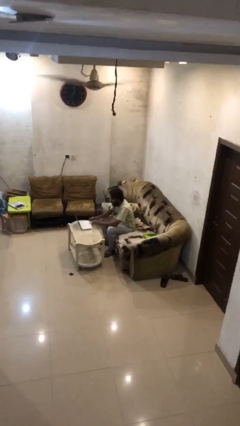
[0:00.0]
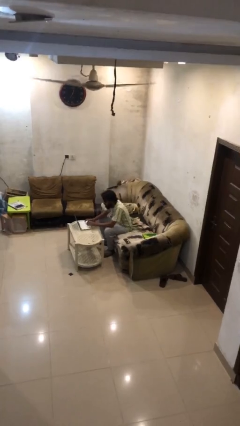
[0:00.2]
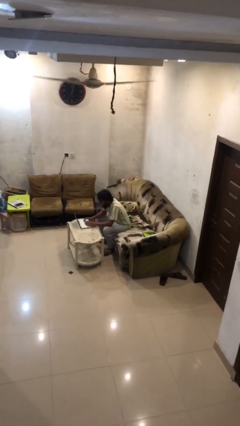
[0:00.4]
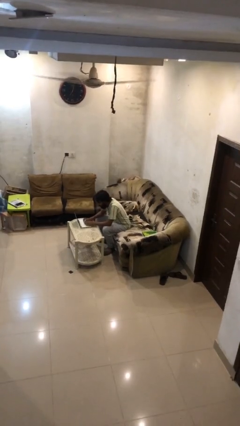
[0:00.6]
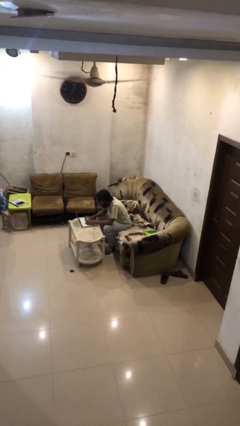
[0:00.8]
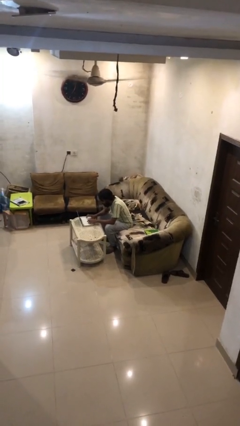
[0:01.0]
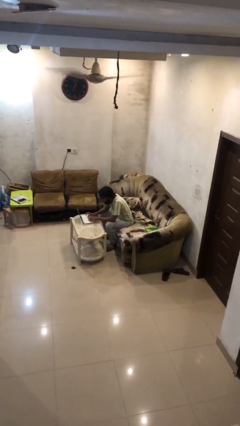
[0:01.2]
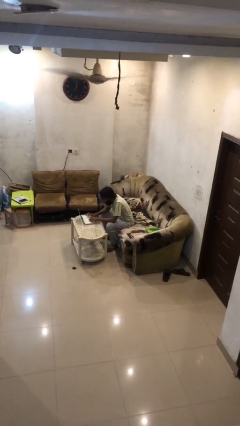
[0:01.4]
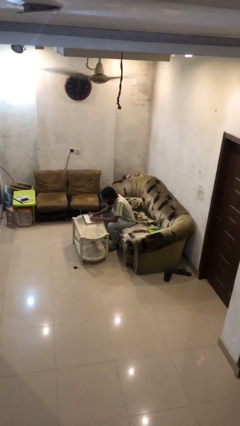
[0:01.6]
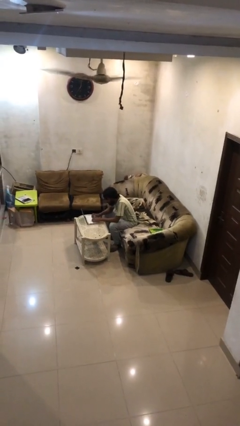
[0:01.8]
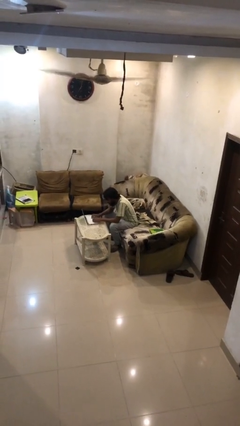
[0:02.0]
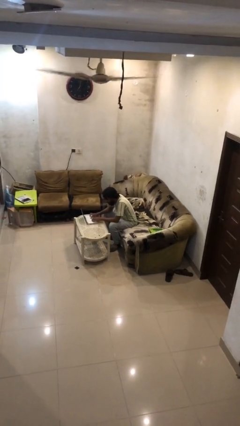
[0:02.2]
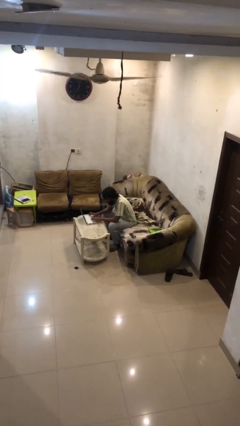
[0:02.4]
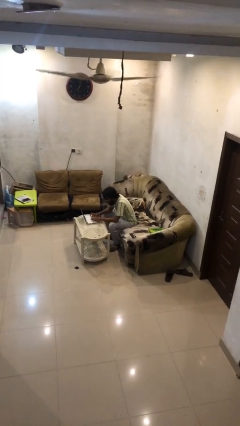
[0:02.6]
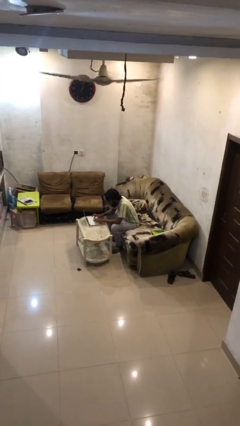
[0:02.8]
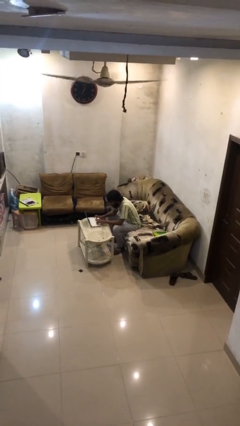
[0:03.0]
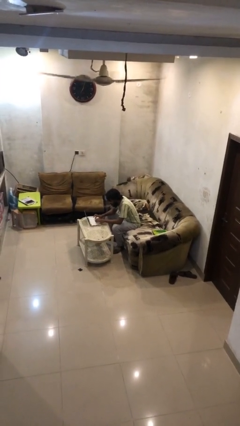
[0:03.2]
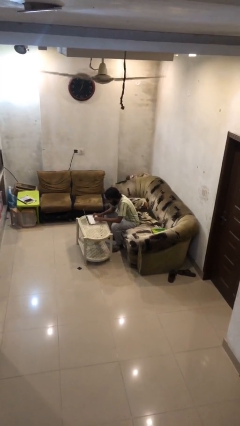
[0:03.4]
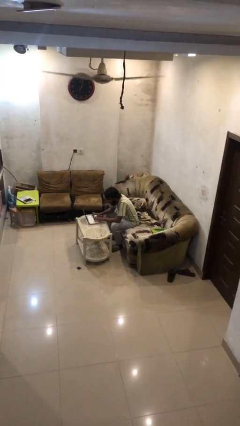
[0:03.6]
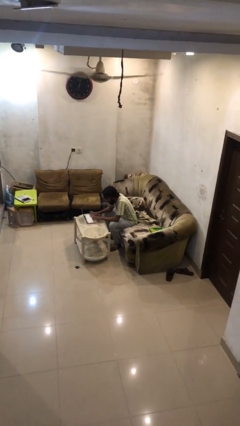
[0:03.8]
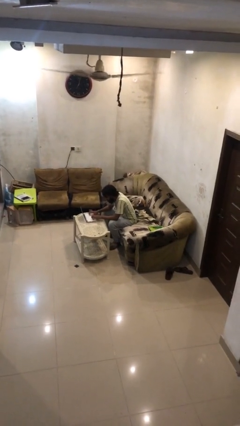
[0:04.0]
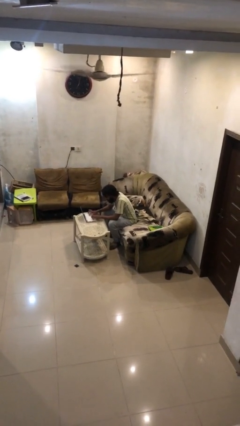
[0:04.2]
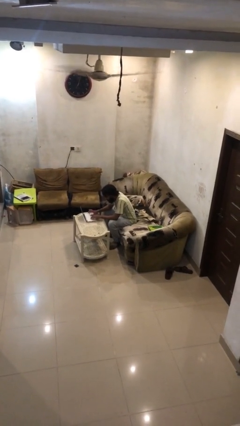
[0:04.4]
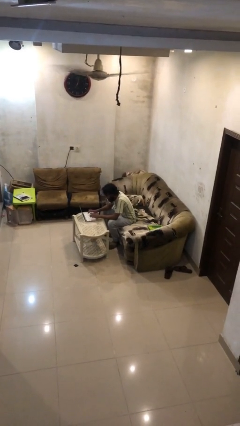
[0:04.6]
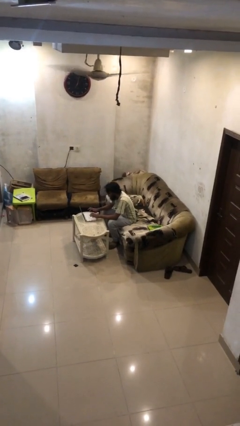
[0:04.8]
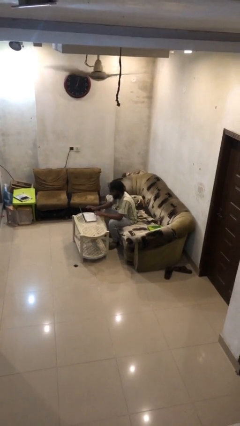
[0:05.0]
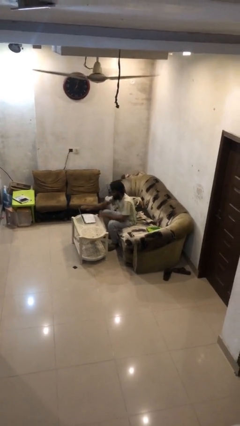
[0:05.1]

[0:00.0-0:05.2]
person interacts with laptop

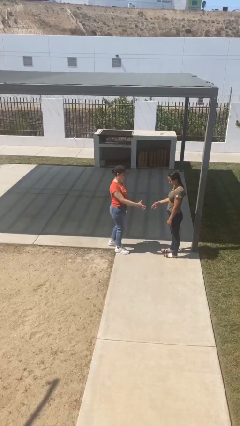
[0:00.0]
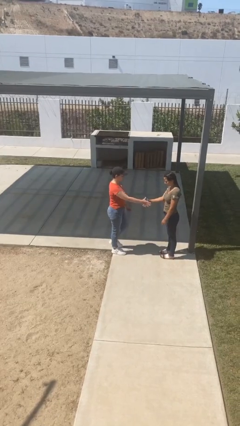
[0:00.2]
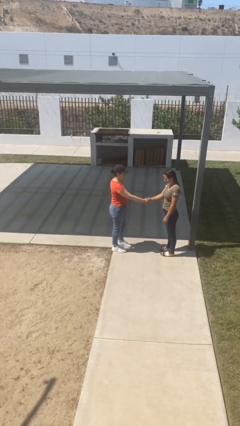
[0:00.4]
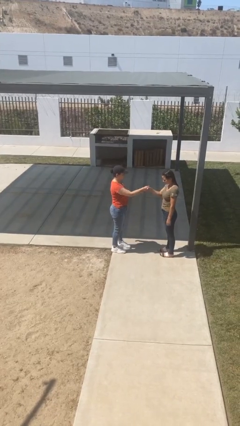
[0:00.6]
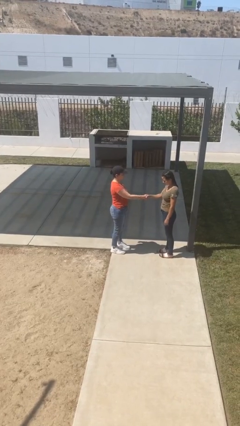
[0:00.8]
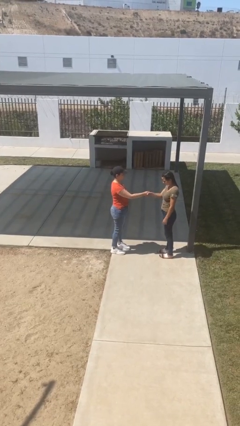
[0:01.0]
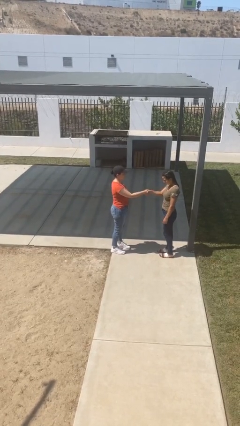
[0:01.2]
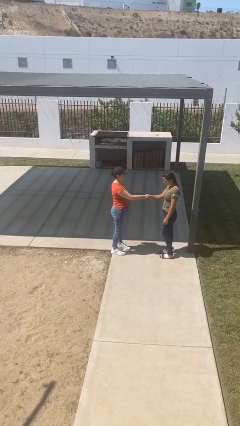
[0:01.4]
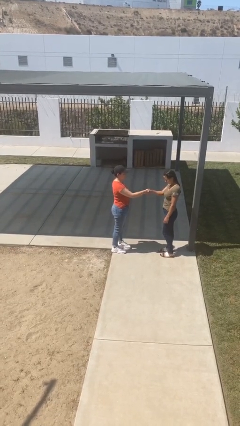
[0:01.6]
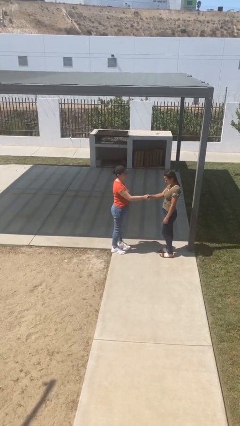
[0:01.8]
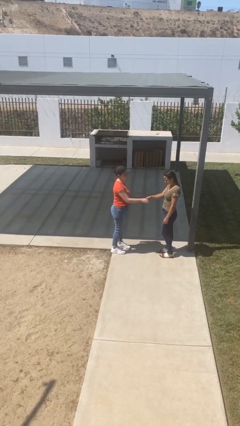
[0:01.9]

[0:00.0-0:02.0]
person shakes hand

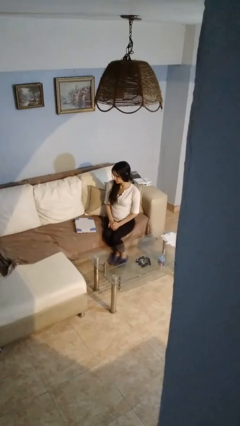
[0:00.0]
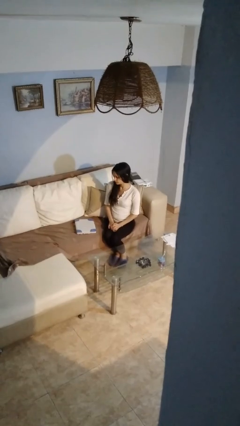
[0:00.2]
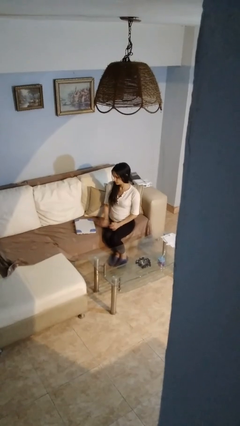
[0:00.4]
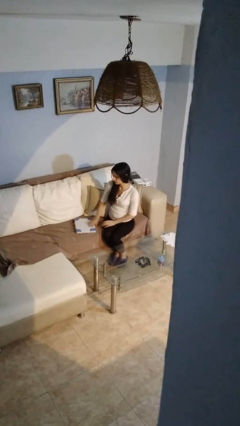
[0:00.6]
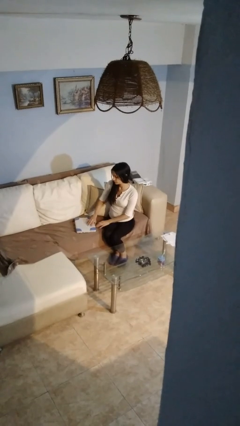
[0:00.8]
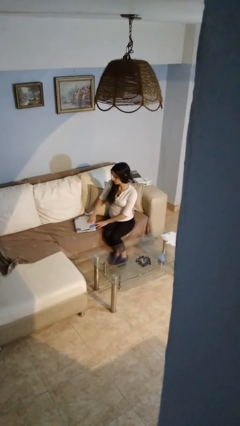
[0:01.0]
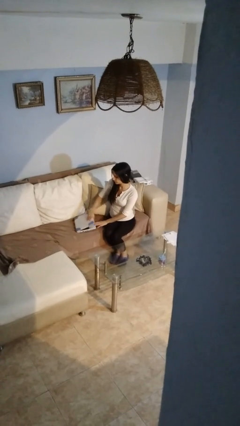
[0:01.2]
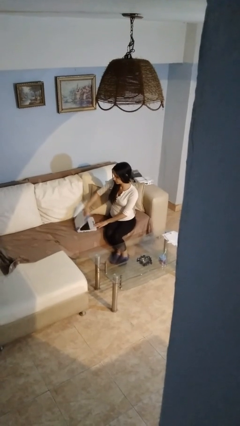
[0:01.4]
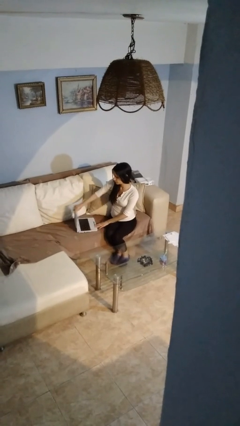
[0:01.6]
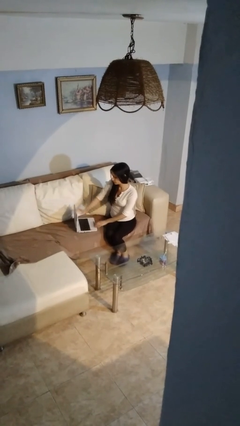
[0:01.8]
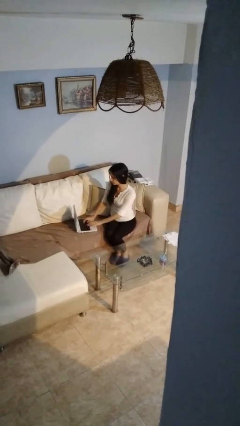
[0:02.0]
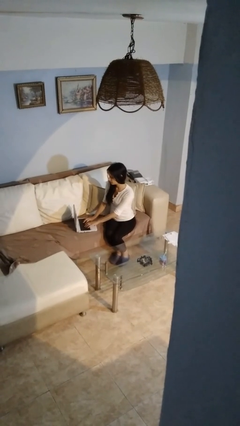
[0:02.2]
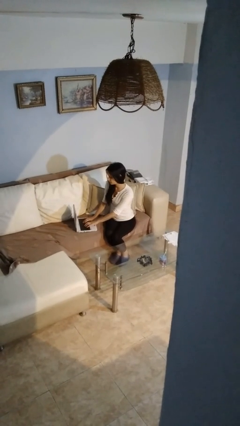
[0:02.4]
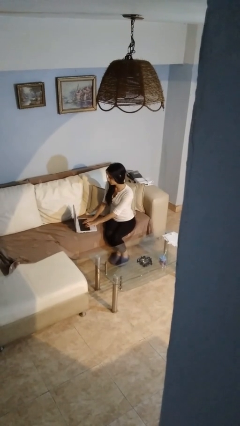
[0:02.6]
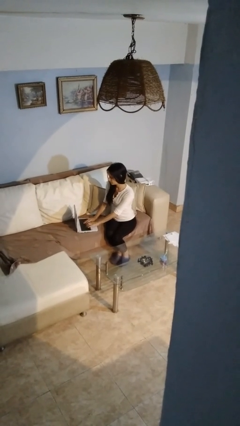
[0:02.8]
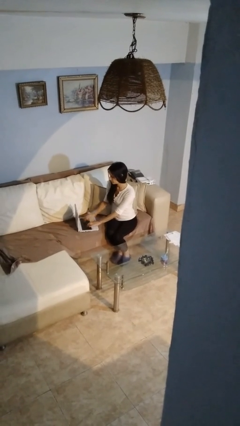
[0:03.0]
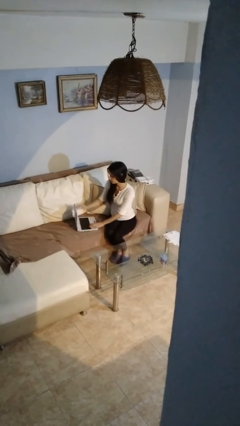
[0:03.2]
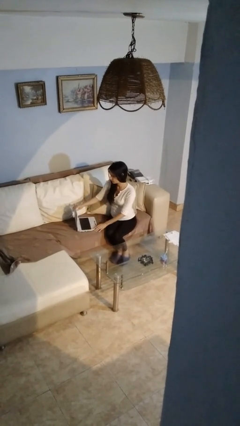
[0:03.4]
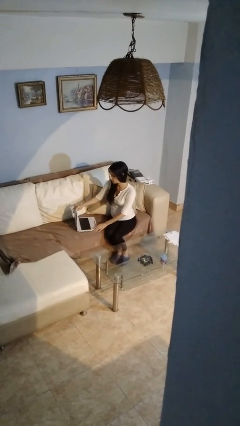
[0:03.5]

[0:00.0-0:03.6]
person opens laptop

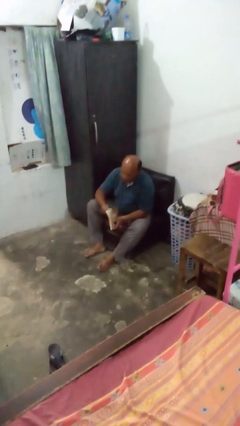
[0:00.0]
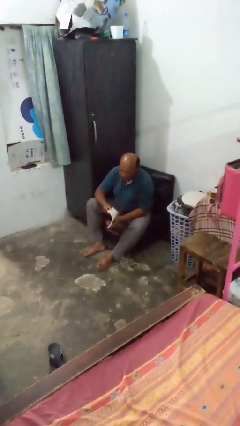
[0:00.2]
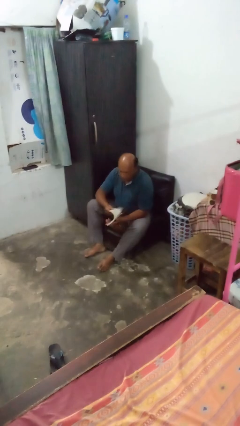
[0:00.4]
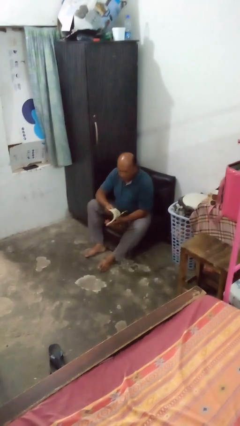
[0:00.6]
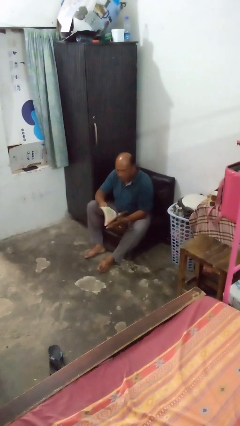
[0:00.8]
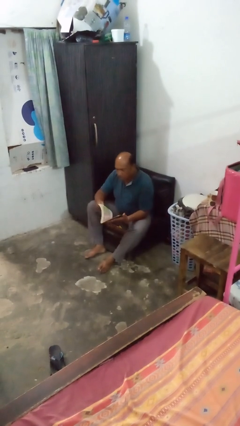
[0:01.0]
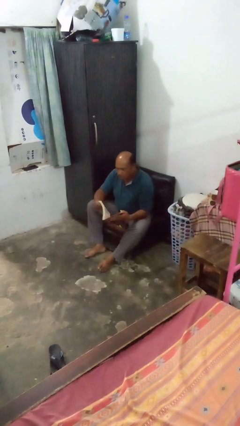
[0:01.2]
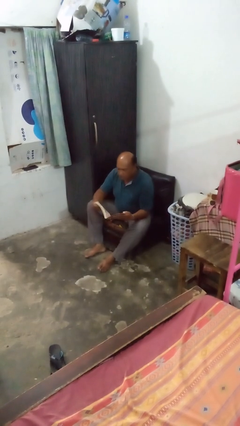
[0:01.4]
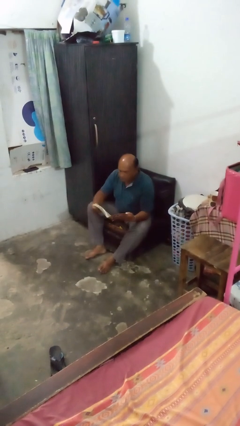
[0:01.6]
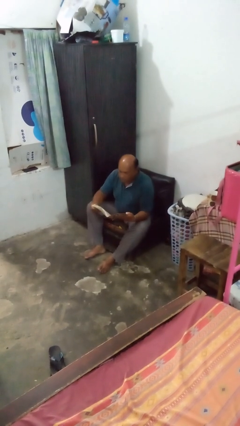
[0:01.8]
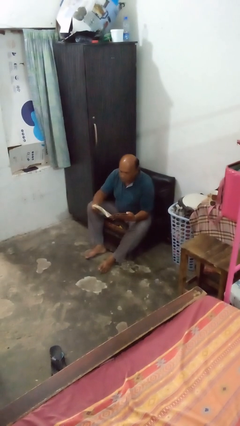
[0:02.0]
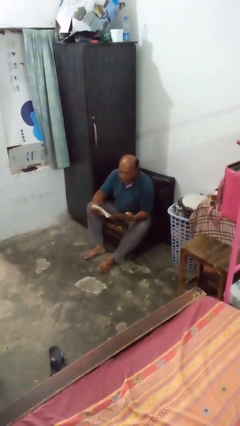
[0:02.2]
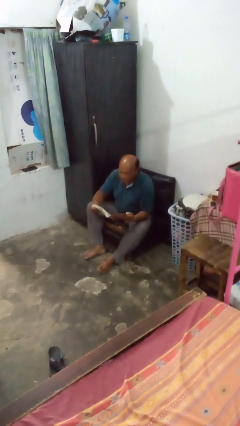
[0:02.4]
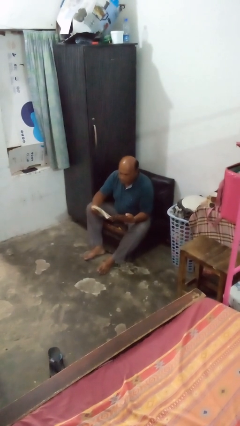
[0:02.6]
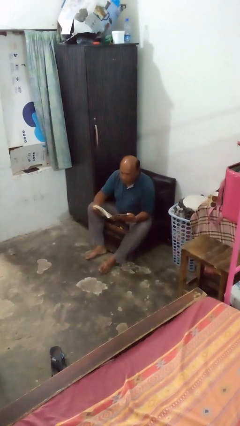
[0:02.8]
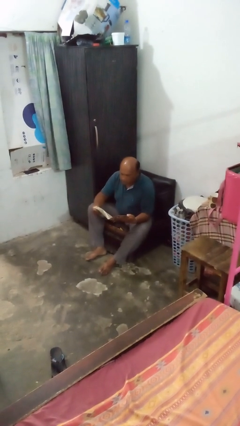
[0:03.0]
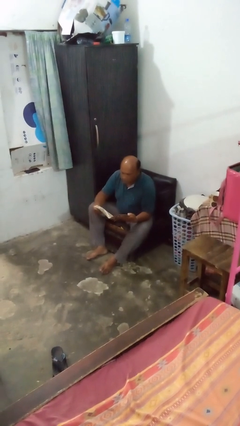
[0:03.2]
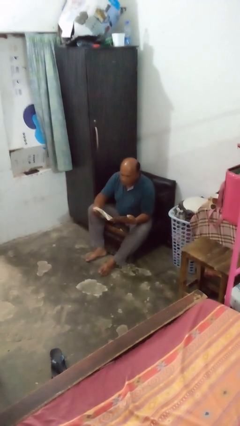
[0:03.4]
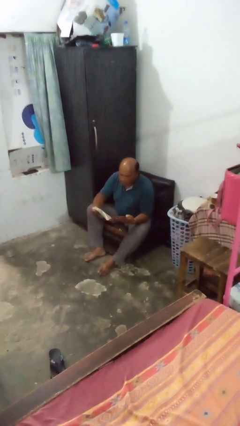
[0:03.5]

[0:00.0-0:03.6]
person reads magazine

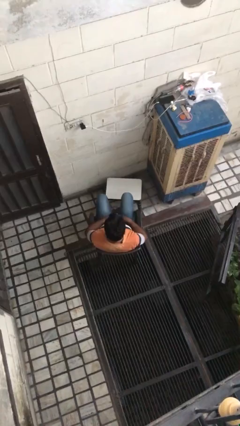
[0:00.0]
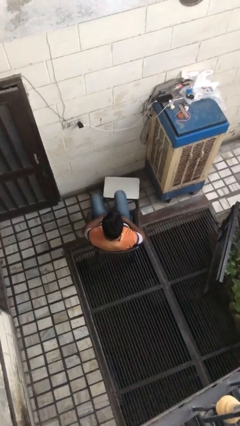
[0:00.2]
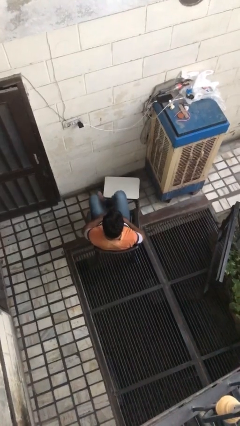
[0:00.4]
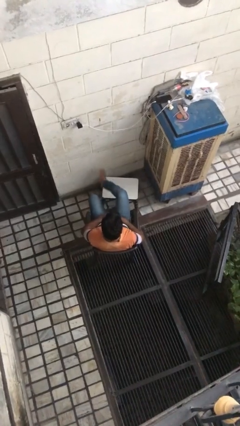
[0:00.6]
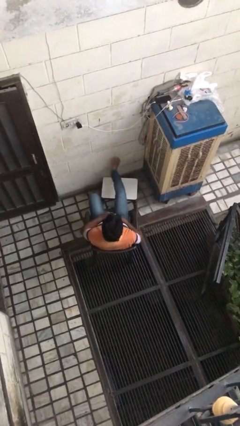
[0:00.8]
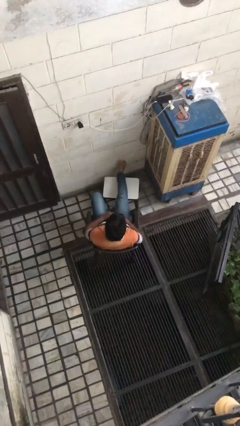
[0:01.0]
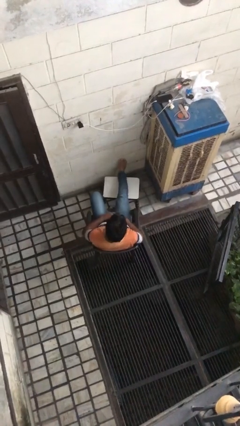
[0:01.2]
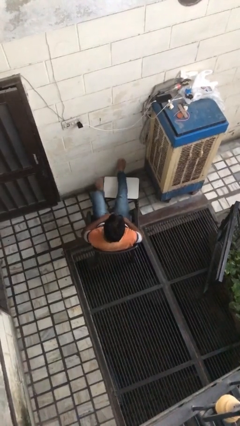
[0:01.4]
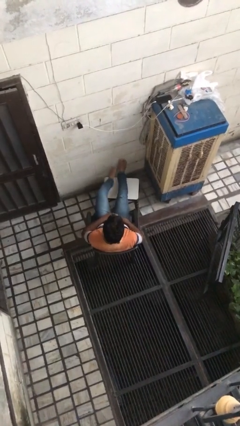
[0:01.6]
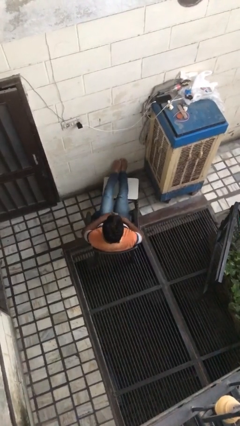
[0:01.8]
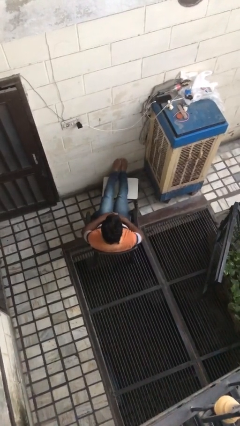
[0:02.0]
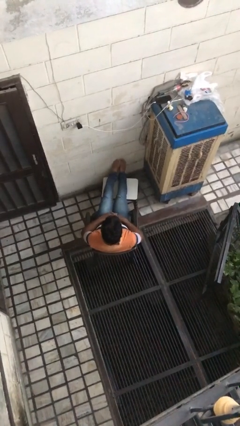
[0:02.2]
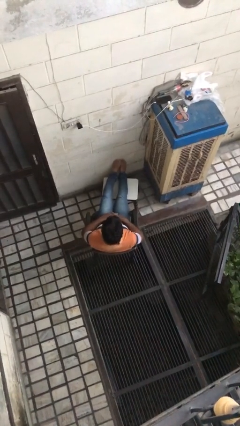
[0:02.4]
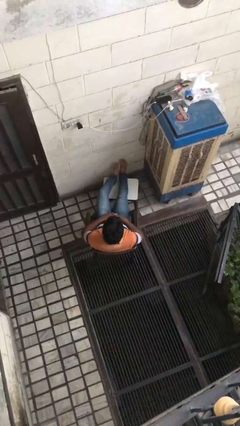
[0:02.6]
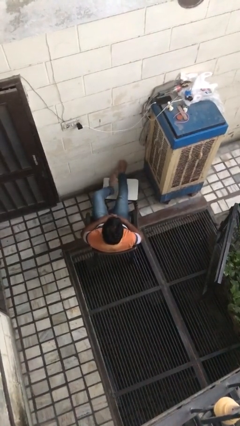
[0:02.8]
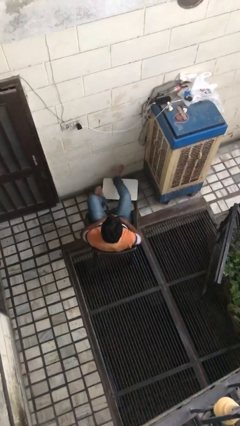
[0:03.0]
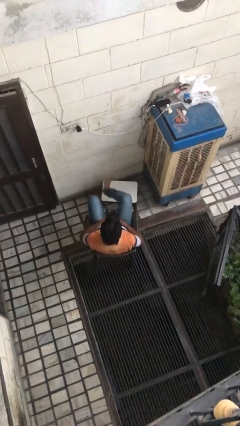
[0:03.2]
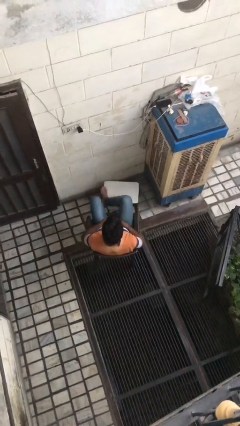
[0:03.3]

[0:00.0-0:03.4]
person puts feet up

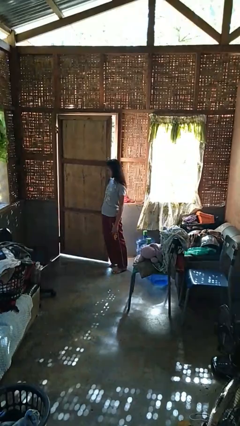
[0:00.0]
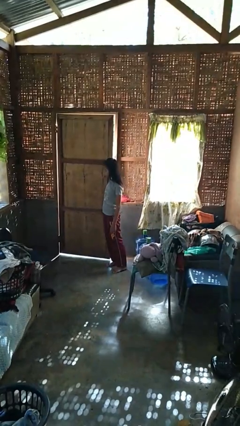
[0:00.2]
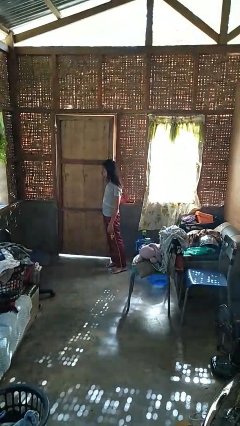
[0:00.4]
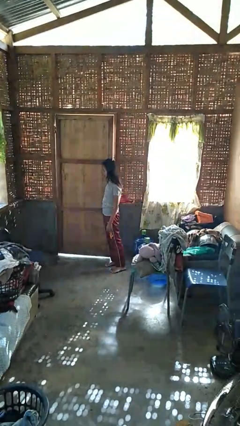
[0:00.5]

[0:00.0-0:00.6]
person closes door with hip
